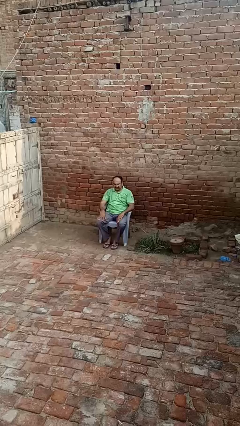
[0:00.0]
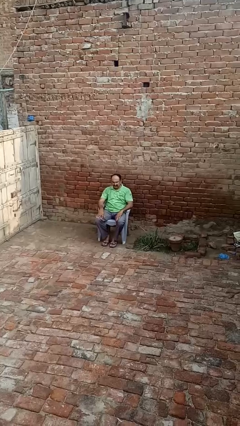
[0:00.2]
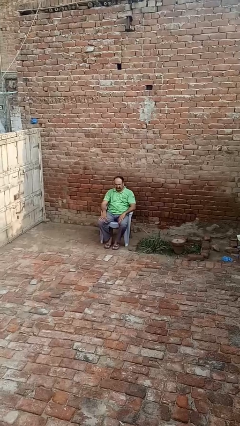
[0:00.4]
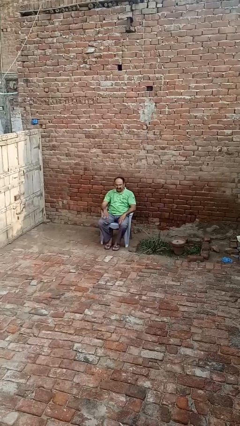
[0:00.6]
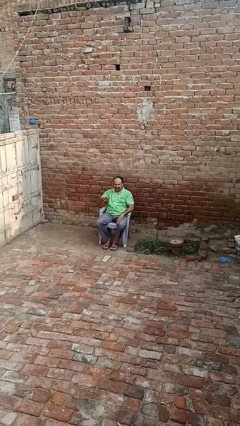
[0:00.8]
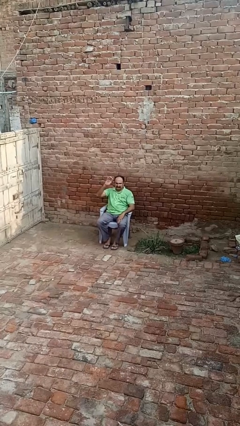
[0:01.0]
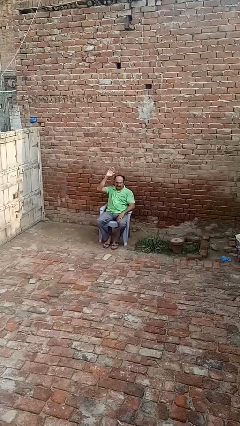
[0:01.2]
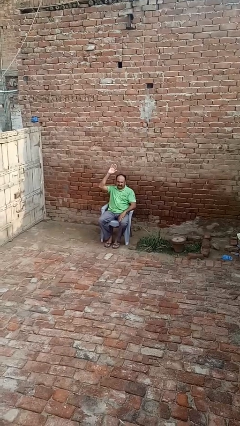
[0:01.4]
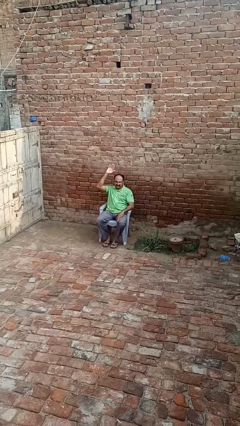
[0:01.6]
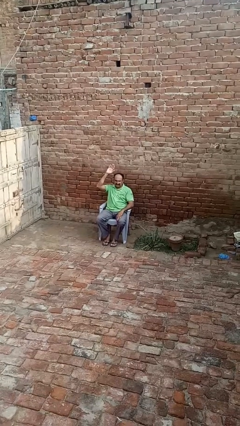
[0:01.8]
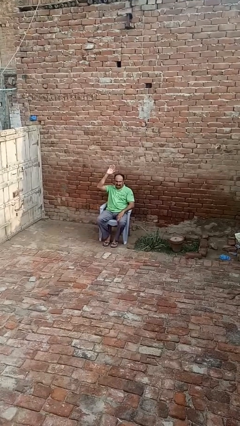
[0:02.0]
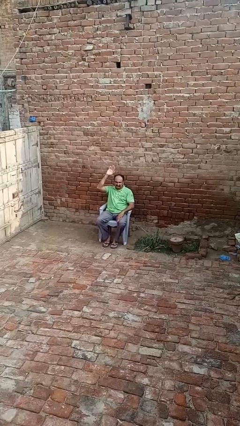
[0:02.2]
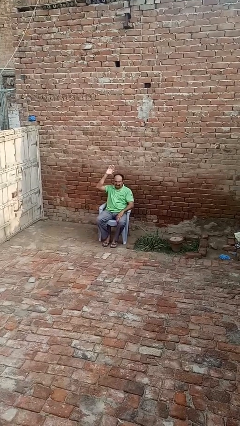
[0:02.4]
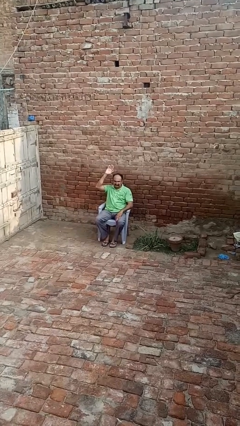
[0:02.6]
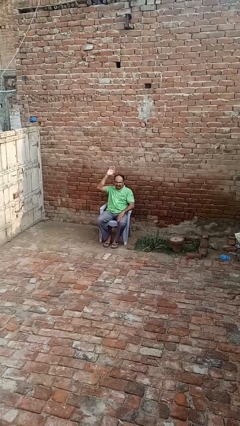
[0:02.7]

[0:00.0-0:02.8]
person gestures raise hand

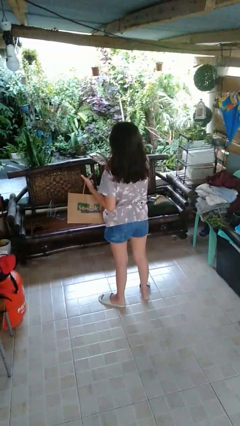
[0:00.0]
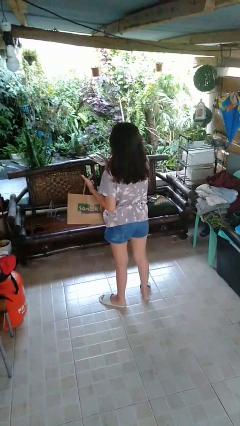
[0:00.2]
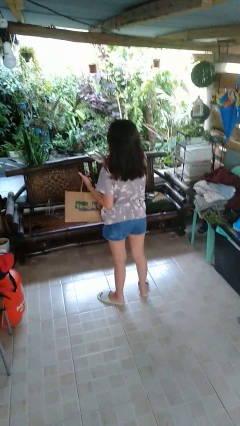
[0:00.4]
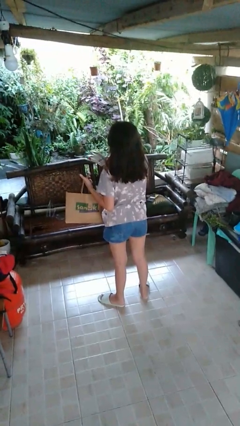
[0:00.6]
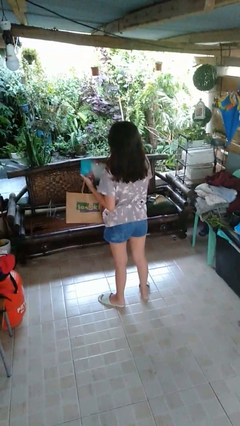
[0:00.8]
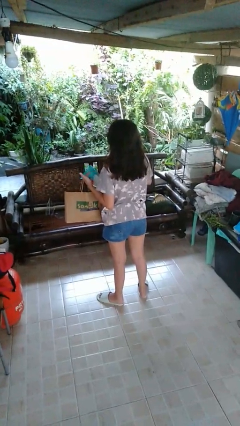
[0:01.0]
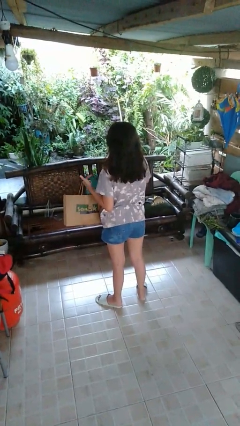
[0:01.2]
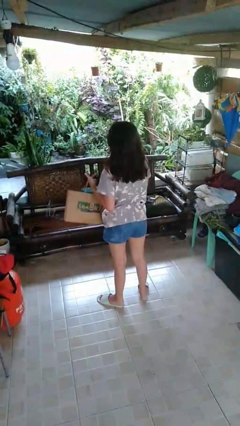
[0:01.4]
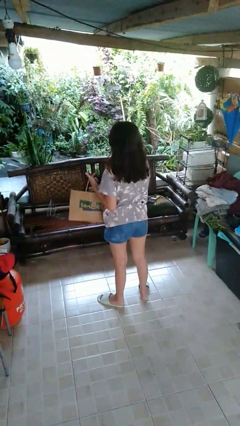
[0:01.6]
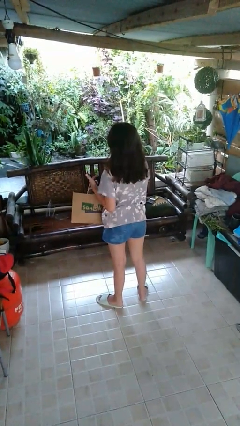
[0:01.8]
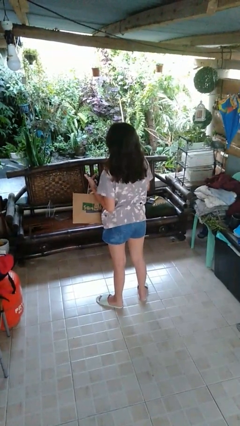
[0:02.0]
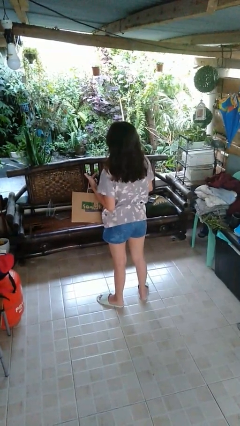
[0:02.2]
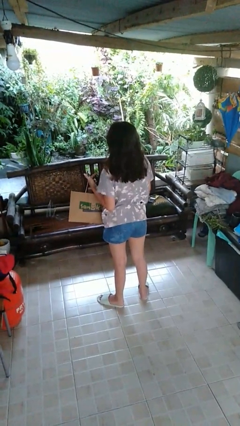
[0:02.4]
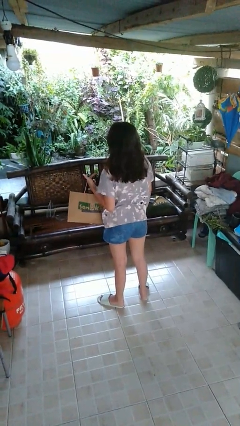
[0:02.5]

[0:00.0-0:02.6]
person puts object into bag

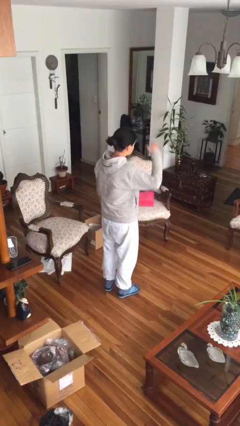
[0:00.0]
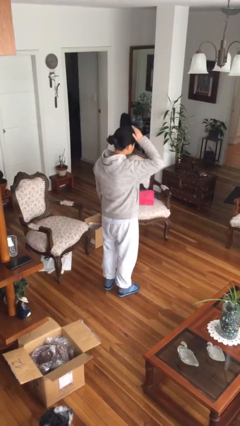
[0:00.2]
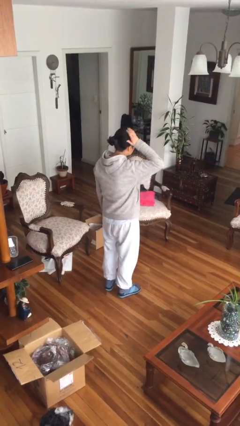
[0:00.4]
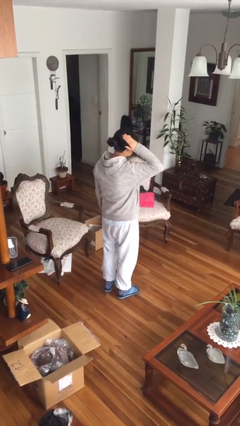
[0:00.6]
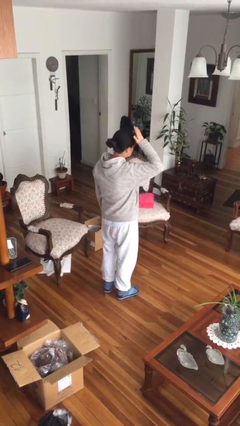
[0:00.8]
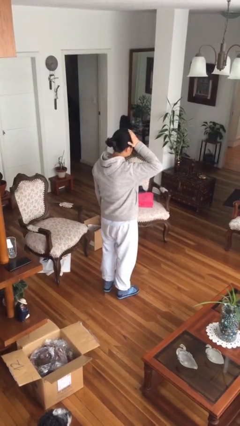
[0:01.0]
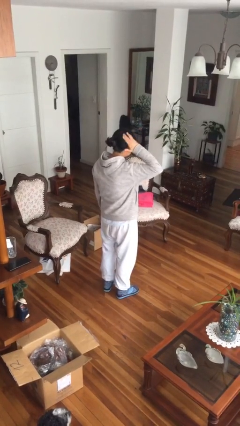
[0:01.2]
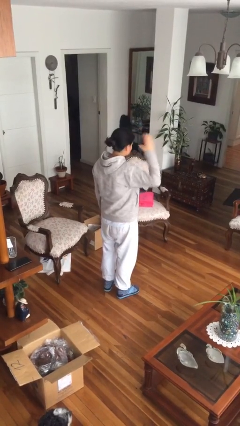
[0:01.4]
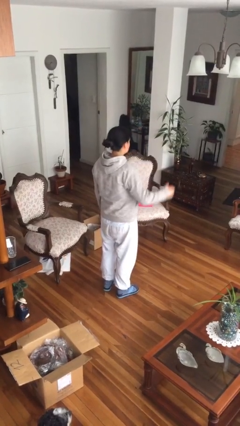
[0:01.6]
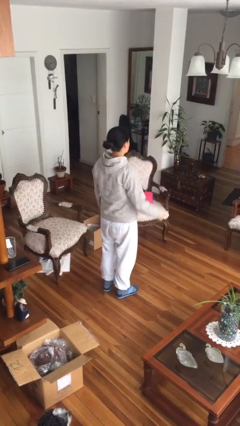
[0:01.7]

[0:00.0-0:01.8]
person pats head

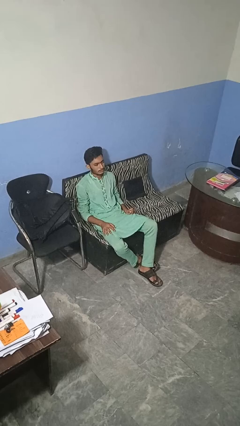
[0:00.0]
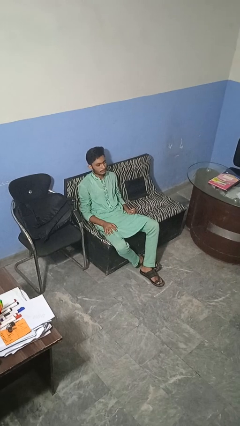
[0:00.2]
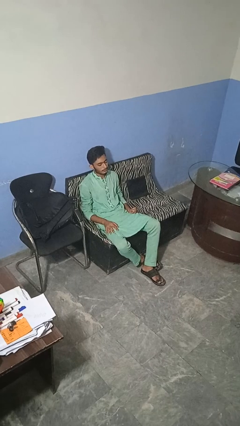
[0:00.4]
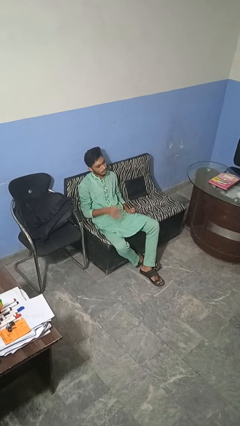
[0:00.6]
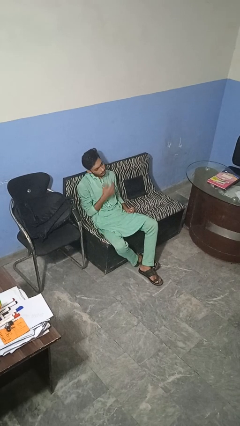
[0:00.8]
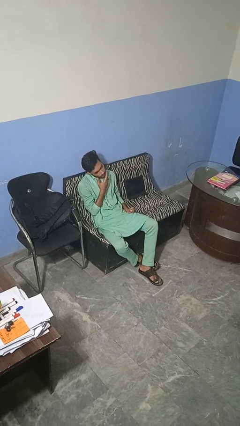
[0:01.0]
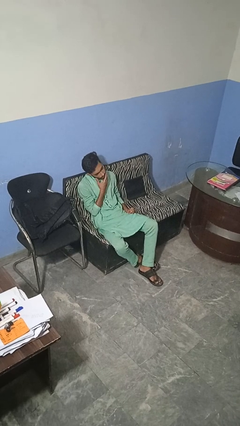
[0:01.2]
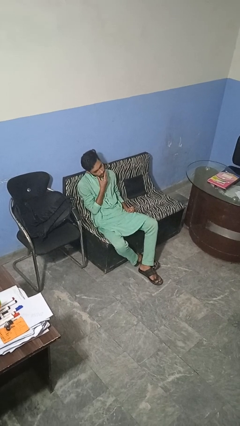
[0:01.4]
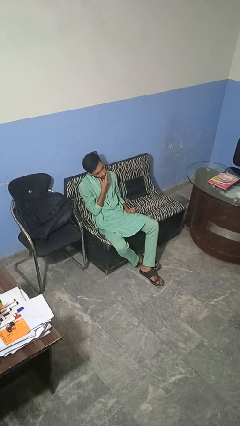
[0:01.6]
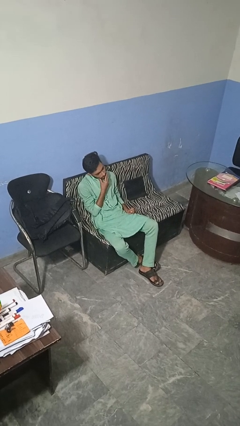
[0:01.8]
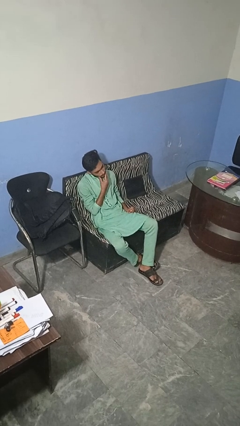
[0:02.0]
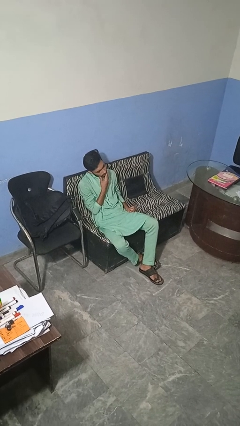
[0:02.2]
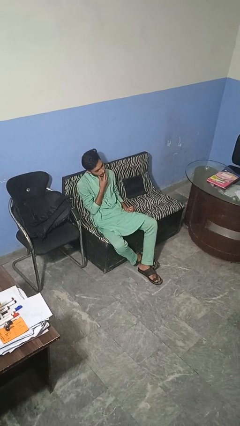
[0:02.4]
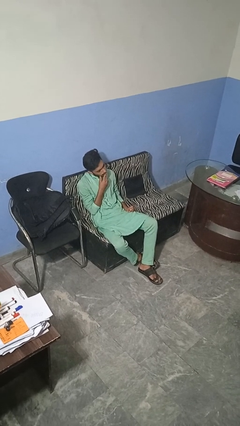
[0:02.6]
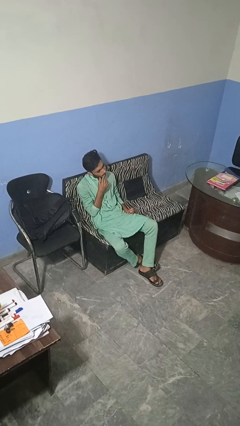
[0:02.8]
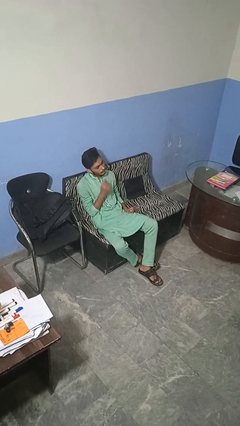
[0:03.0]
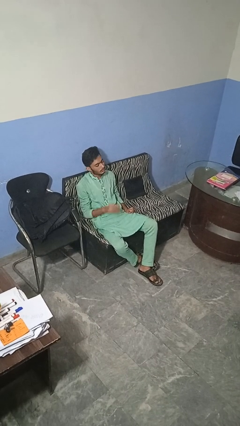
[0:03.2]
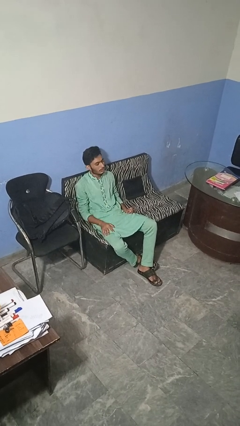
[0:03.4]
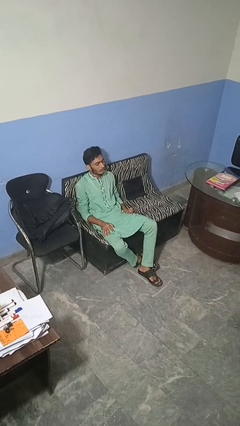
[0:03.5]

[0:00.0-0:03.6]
person strokes chin

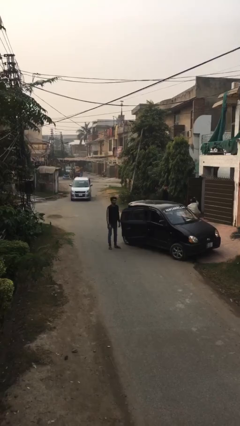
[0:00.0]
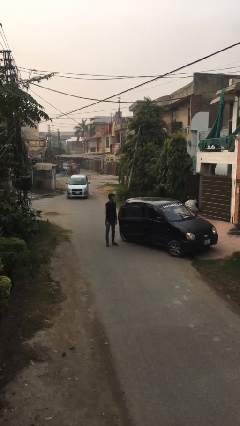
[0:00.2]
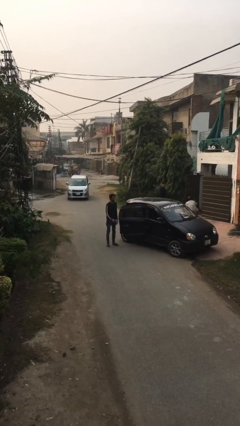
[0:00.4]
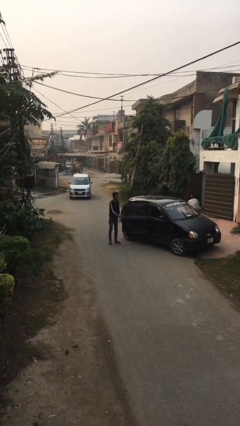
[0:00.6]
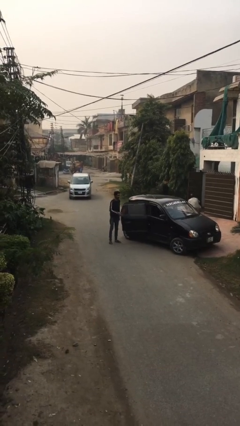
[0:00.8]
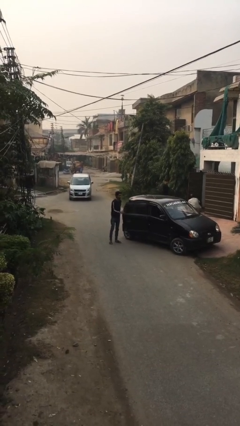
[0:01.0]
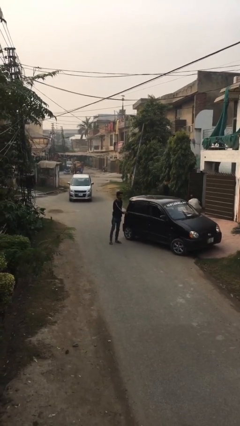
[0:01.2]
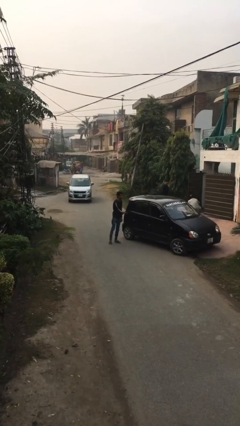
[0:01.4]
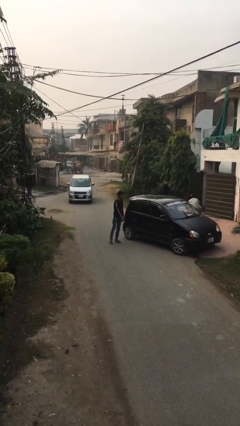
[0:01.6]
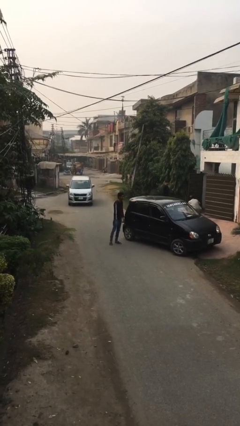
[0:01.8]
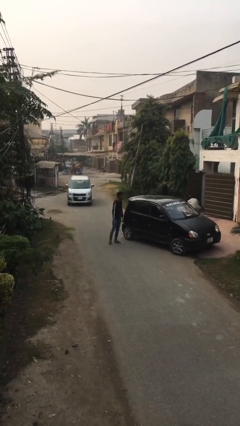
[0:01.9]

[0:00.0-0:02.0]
person closes car door

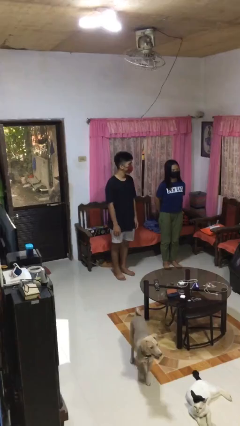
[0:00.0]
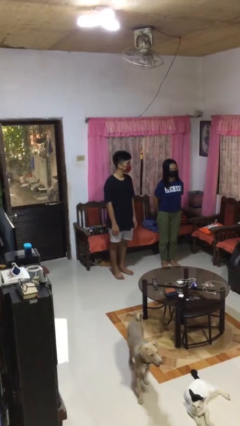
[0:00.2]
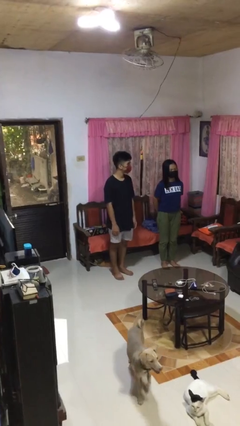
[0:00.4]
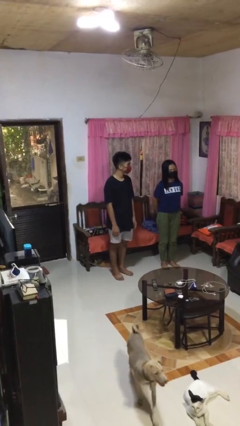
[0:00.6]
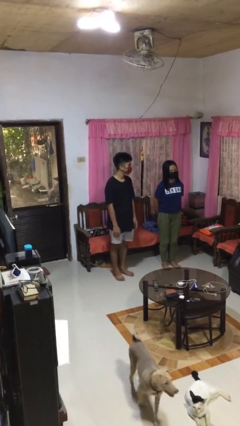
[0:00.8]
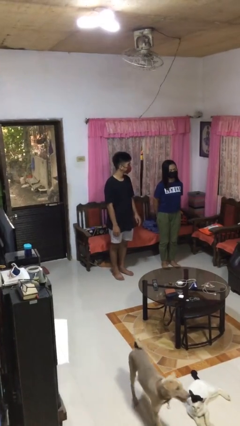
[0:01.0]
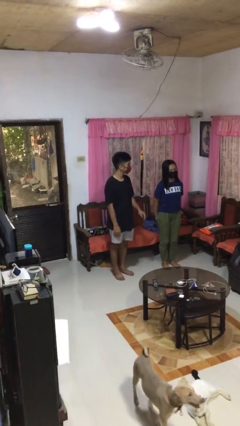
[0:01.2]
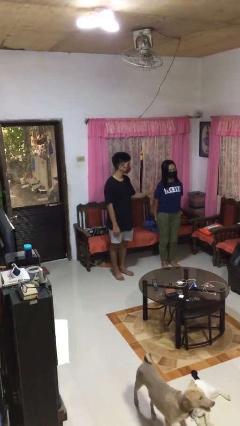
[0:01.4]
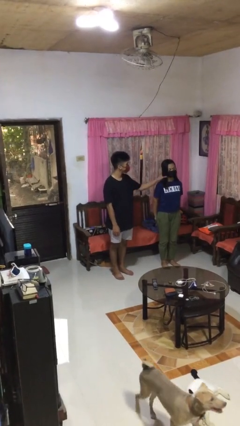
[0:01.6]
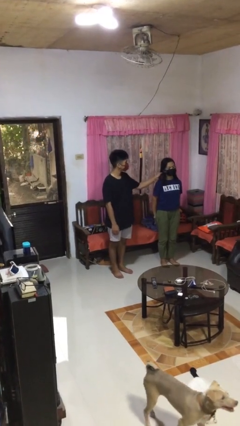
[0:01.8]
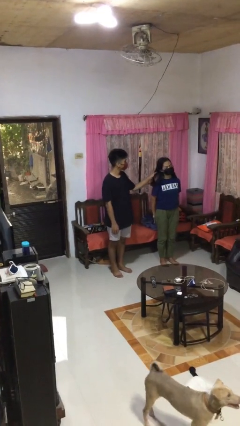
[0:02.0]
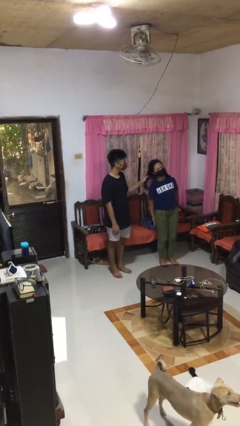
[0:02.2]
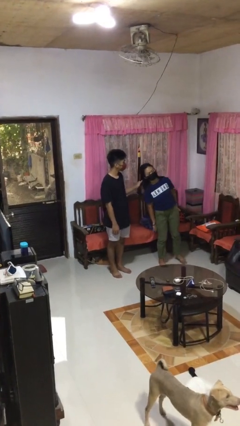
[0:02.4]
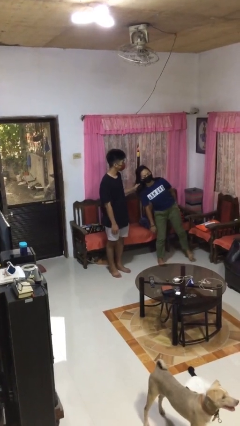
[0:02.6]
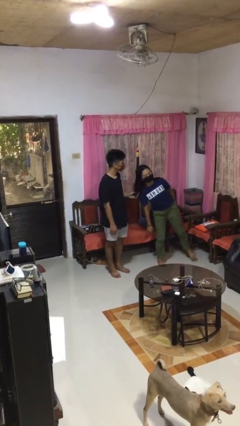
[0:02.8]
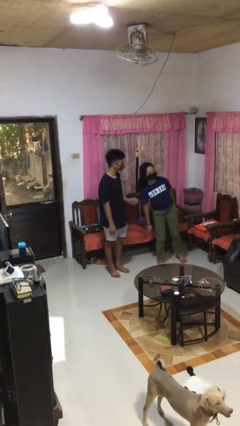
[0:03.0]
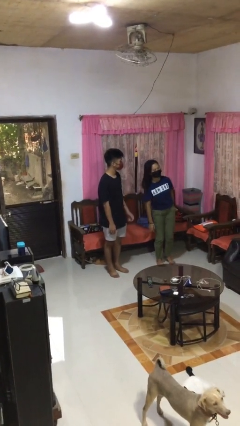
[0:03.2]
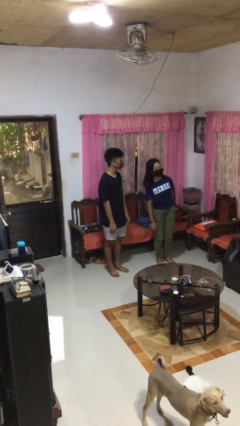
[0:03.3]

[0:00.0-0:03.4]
person grabs person by hair

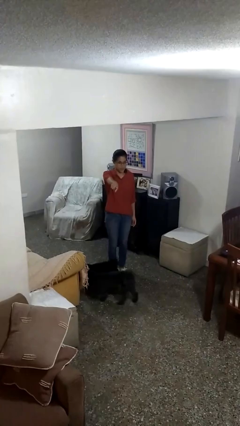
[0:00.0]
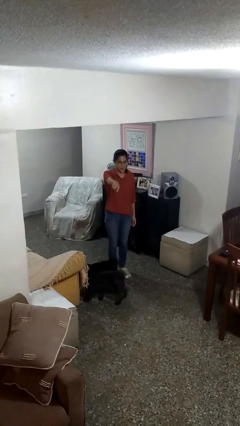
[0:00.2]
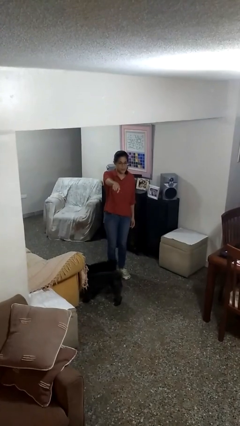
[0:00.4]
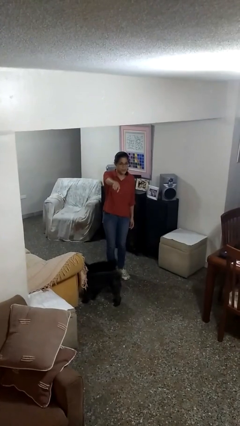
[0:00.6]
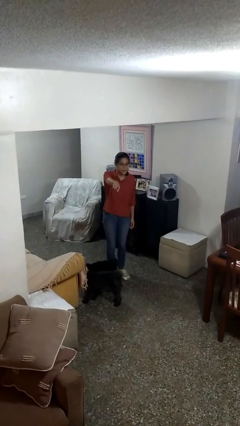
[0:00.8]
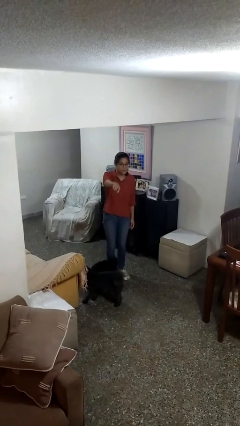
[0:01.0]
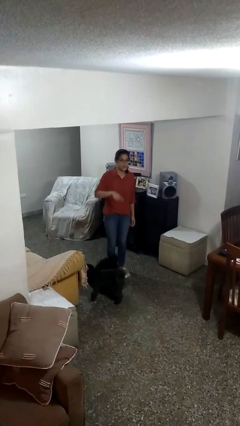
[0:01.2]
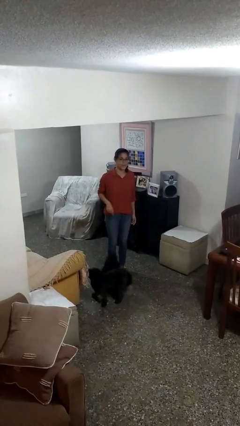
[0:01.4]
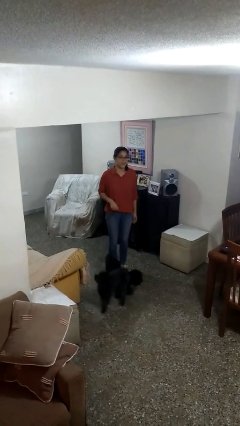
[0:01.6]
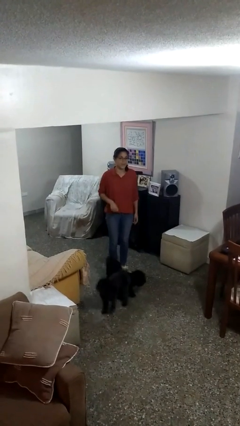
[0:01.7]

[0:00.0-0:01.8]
person points at person
